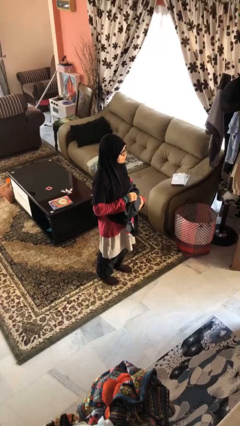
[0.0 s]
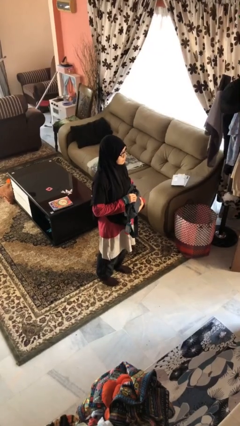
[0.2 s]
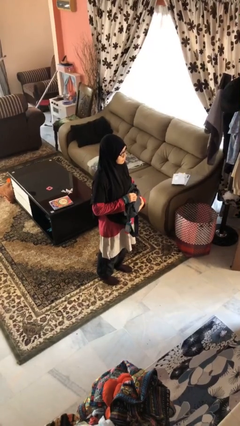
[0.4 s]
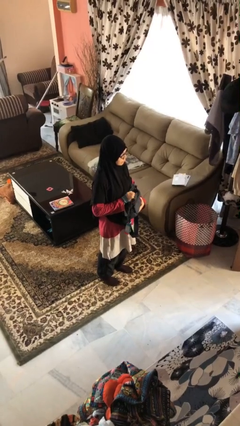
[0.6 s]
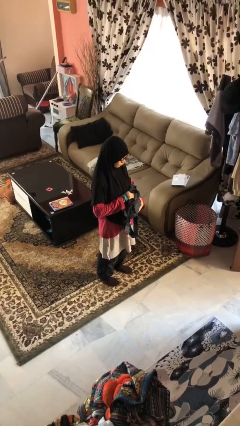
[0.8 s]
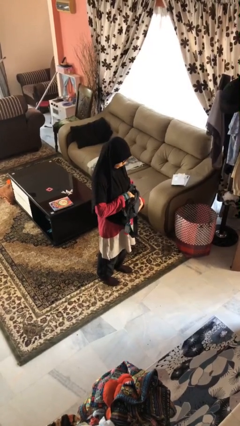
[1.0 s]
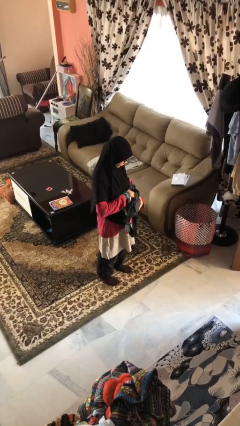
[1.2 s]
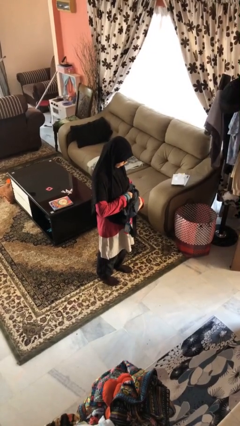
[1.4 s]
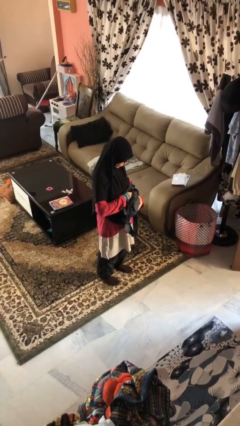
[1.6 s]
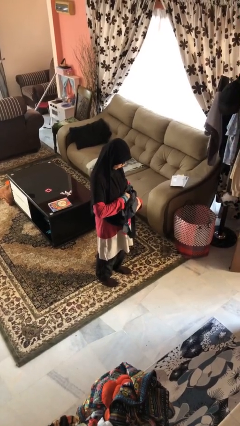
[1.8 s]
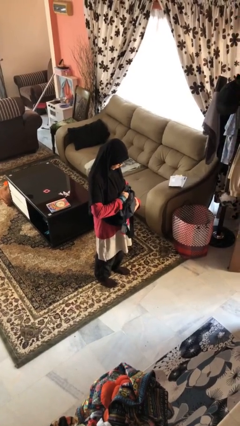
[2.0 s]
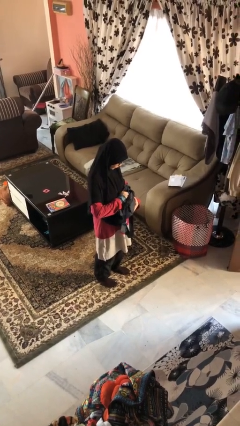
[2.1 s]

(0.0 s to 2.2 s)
person searches in purse

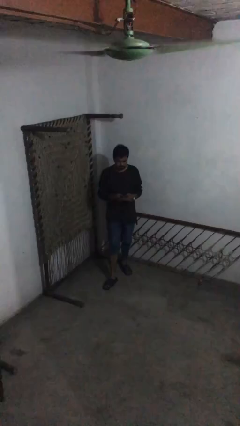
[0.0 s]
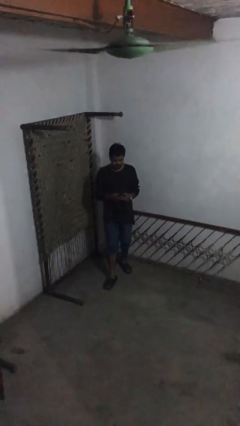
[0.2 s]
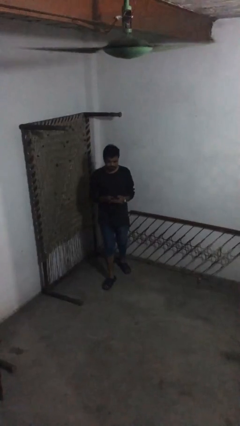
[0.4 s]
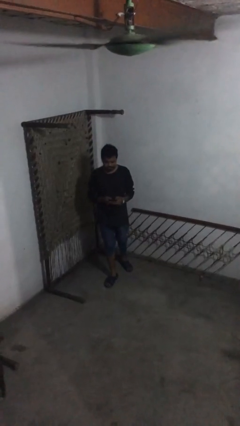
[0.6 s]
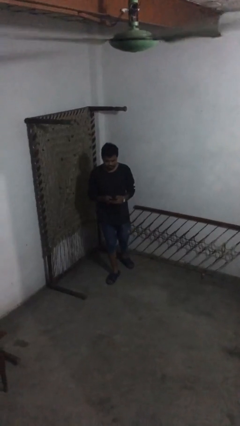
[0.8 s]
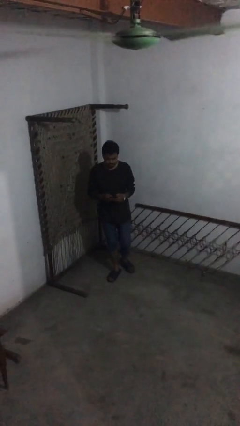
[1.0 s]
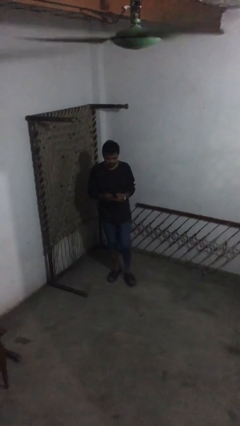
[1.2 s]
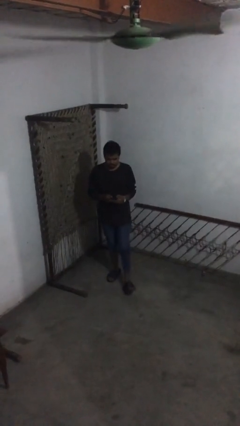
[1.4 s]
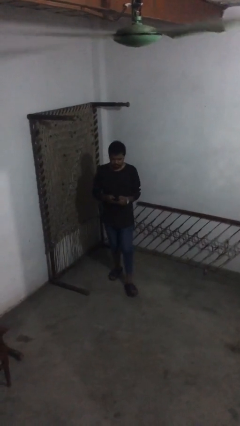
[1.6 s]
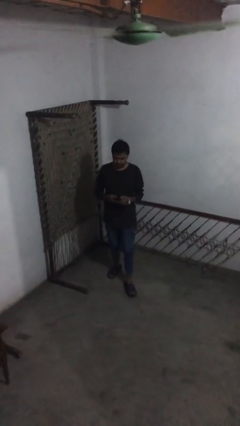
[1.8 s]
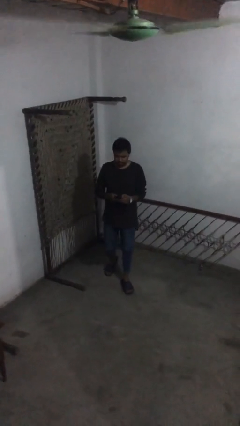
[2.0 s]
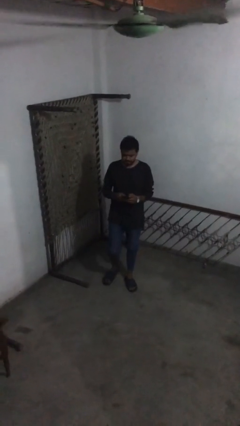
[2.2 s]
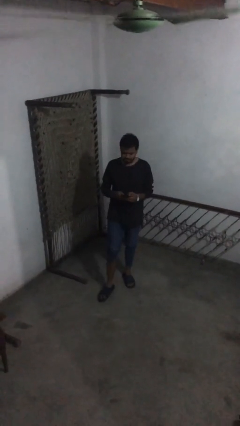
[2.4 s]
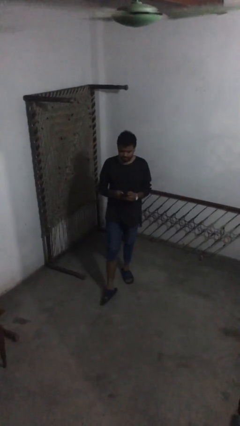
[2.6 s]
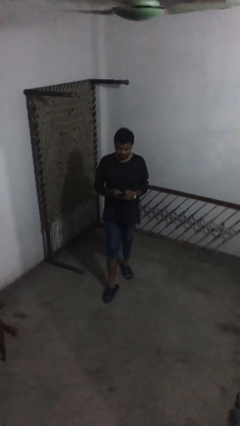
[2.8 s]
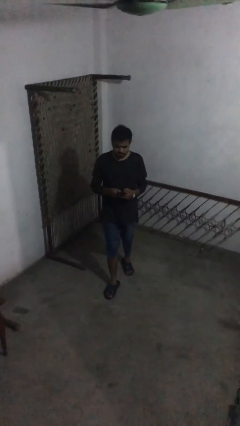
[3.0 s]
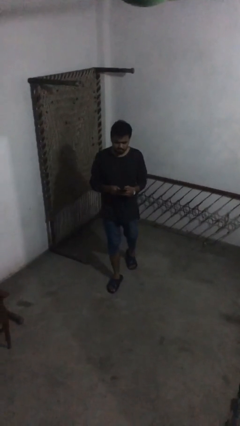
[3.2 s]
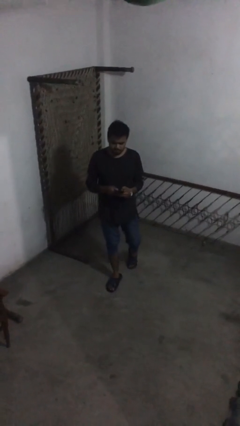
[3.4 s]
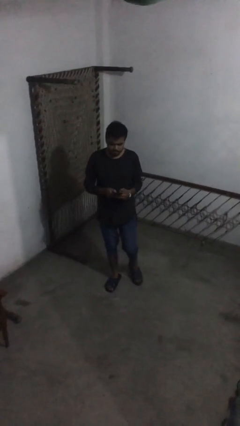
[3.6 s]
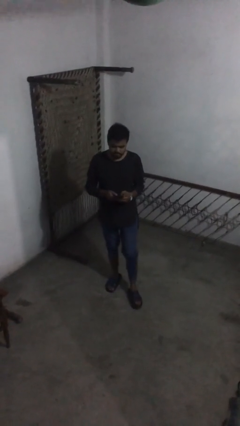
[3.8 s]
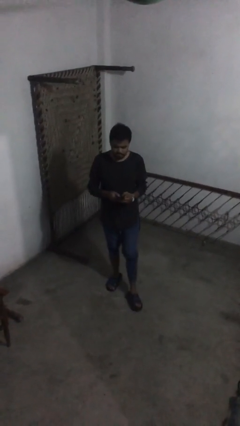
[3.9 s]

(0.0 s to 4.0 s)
person texts on phone

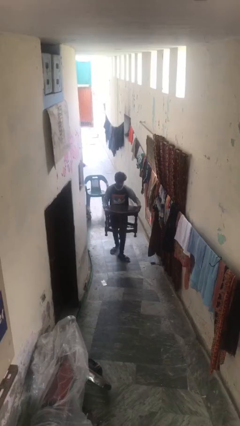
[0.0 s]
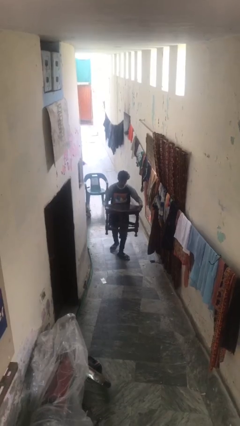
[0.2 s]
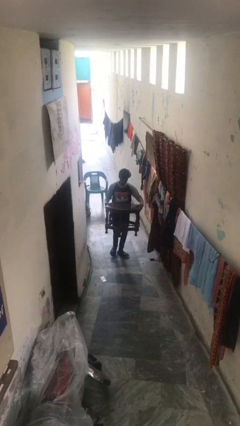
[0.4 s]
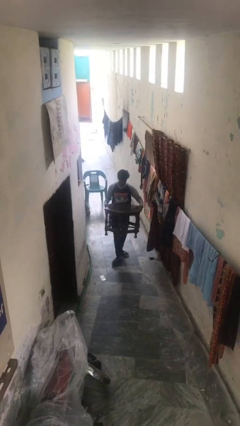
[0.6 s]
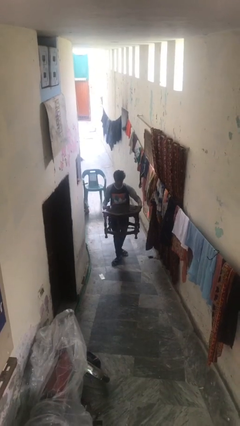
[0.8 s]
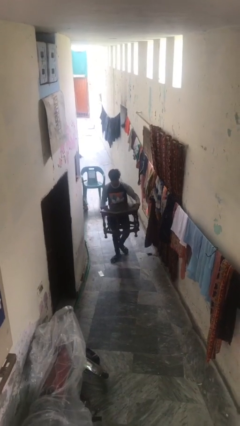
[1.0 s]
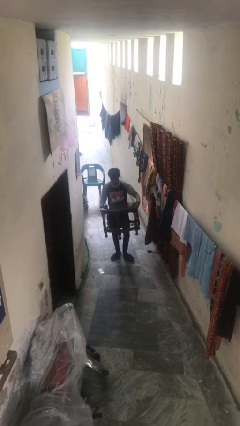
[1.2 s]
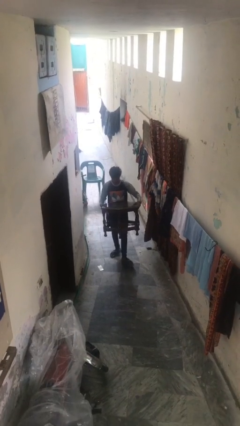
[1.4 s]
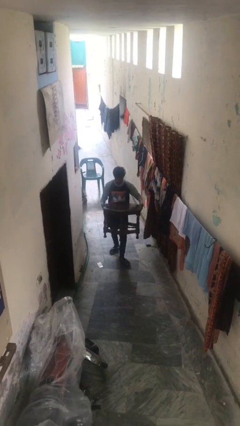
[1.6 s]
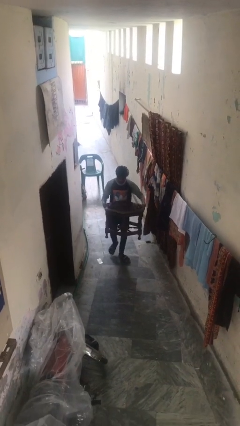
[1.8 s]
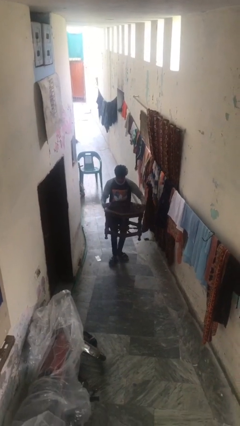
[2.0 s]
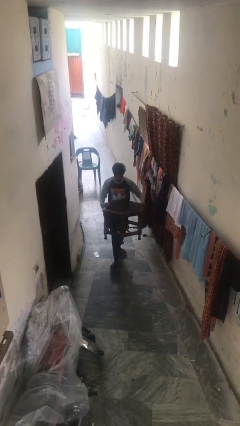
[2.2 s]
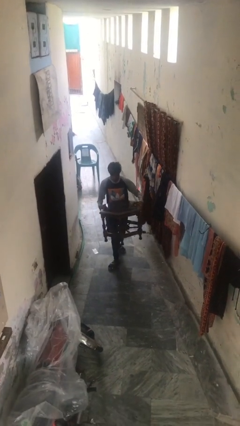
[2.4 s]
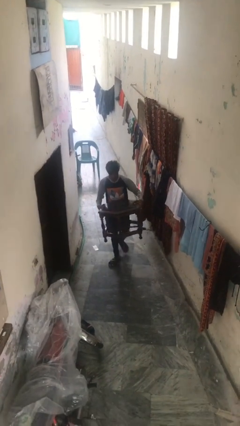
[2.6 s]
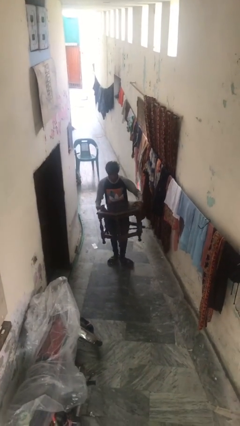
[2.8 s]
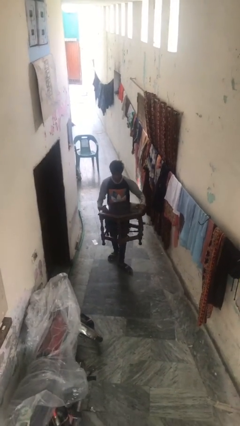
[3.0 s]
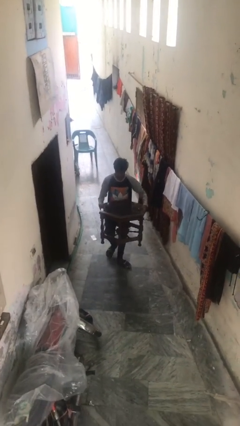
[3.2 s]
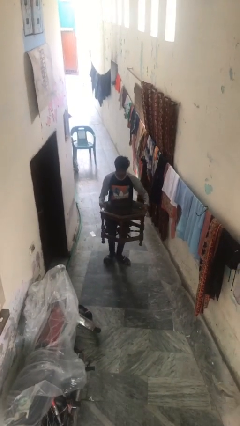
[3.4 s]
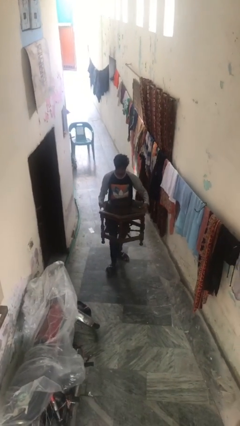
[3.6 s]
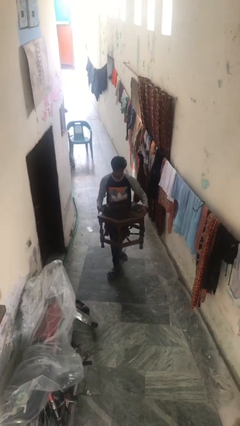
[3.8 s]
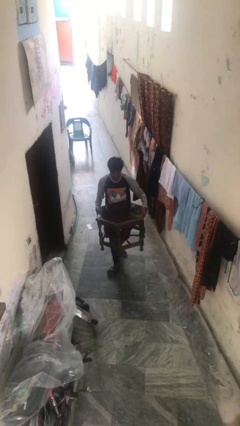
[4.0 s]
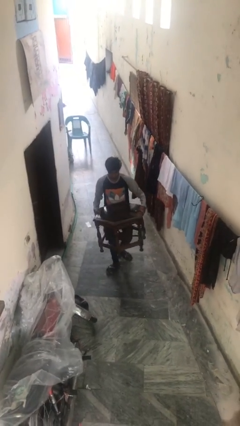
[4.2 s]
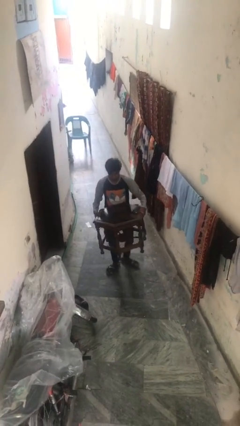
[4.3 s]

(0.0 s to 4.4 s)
person carries heavy object

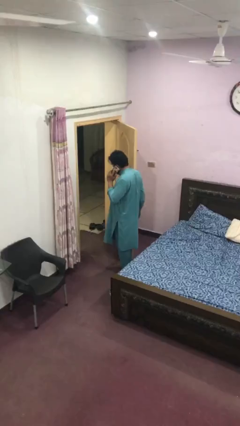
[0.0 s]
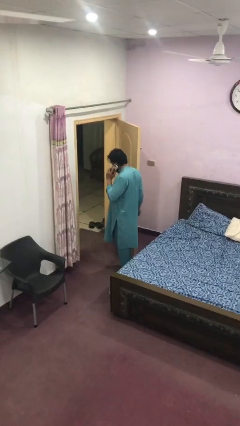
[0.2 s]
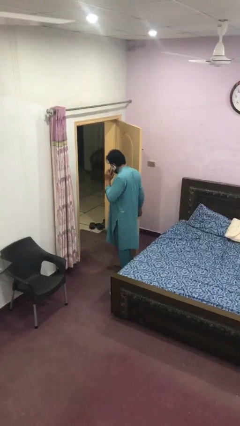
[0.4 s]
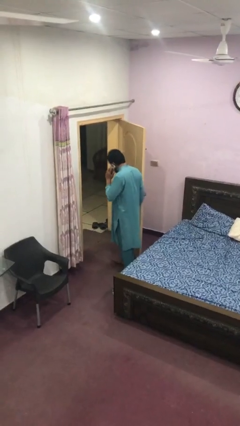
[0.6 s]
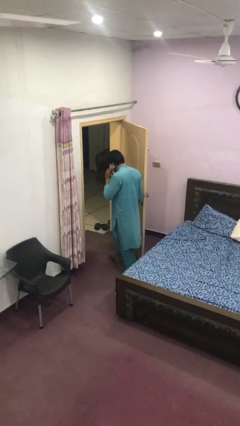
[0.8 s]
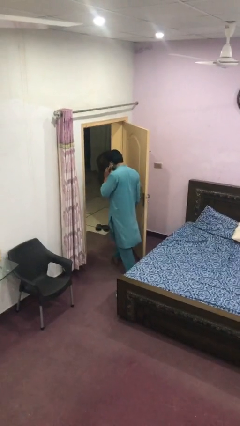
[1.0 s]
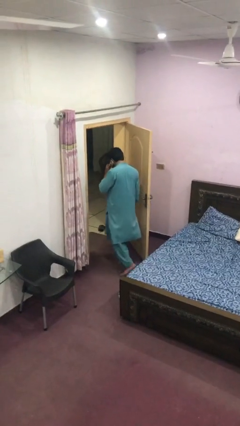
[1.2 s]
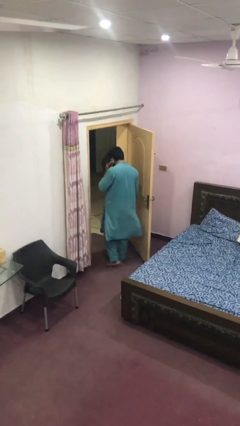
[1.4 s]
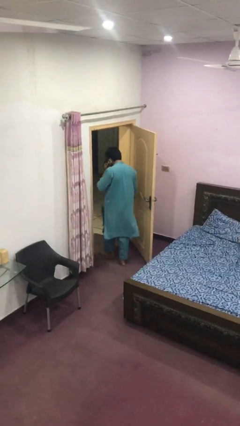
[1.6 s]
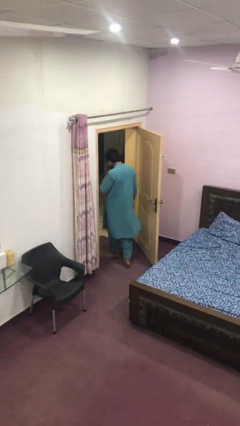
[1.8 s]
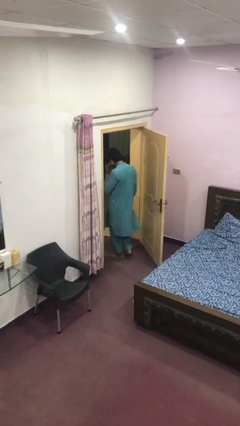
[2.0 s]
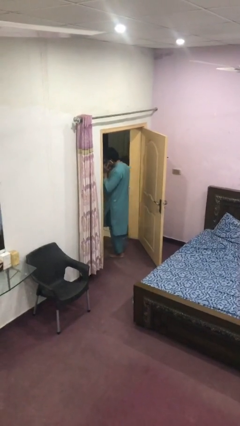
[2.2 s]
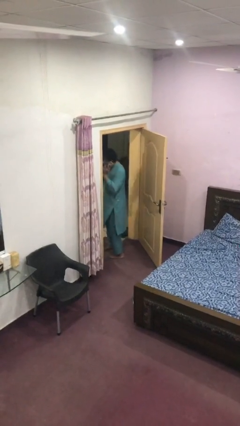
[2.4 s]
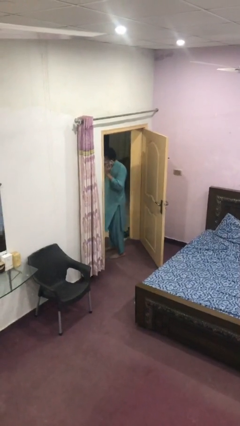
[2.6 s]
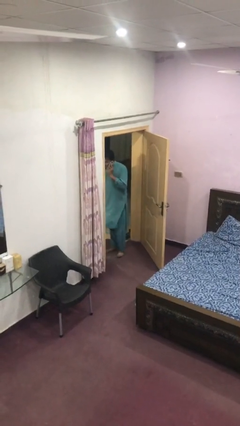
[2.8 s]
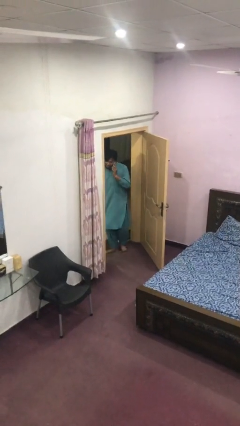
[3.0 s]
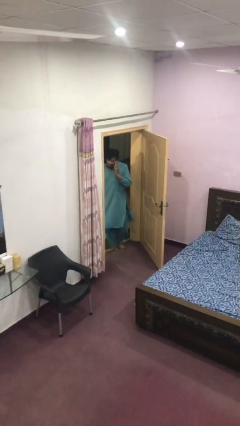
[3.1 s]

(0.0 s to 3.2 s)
person exits scene through structure

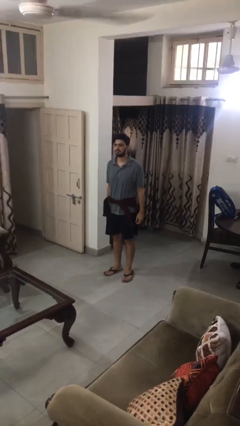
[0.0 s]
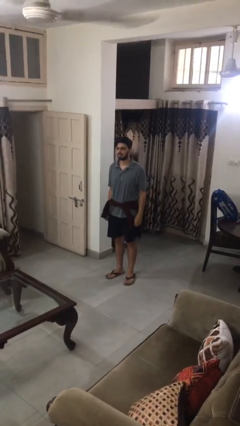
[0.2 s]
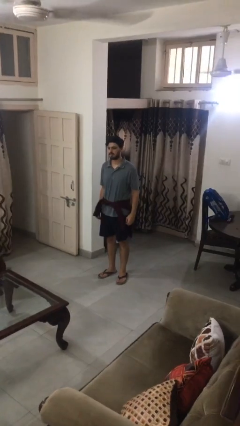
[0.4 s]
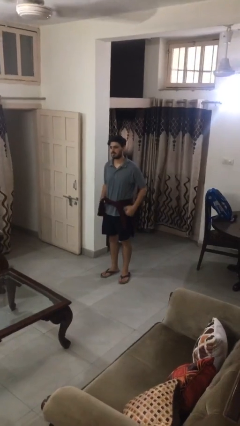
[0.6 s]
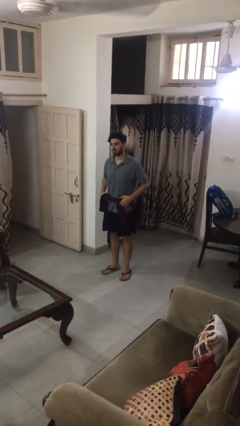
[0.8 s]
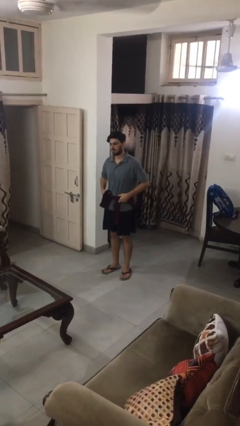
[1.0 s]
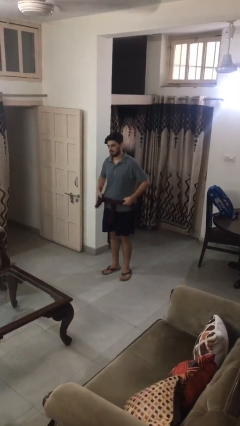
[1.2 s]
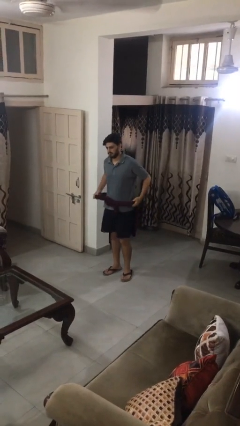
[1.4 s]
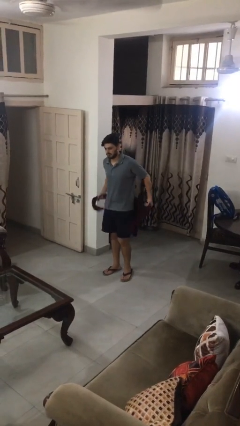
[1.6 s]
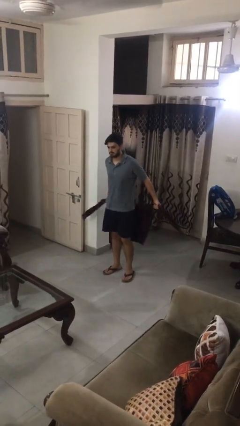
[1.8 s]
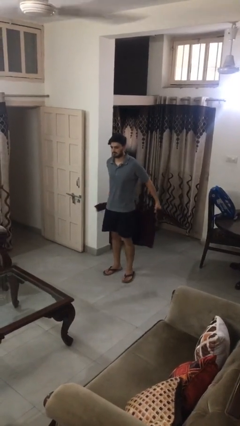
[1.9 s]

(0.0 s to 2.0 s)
person unties jacket around waist

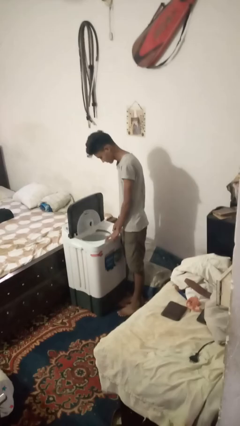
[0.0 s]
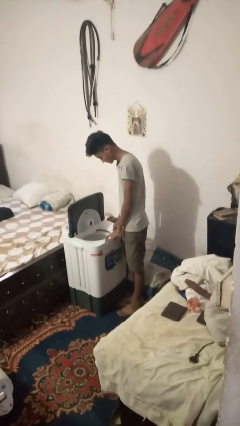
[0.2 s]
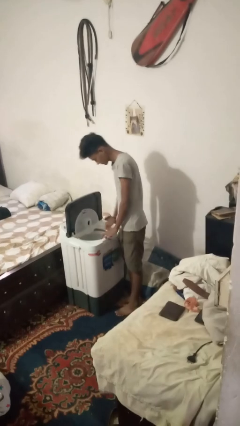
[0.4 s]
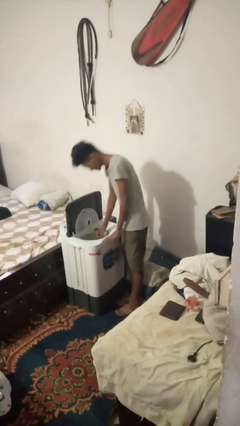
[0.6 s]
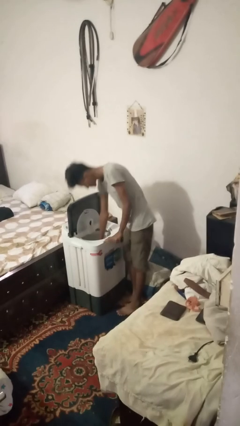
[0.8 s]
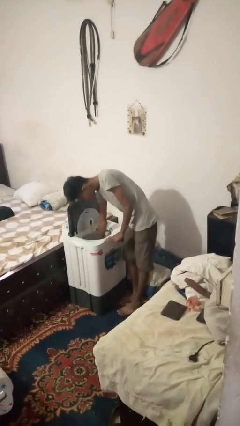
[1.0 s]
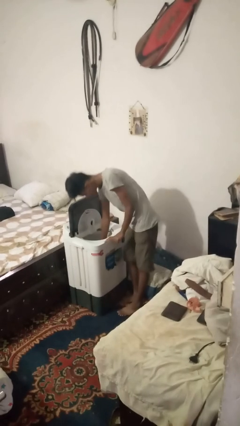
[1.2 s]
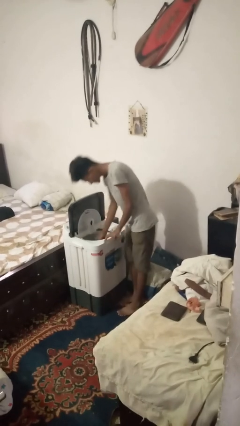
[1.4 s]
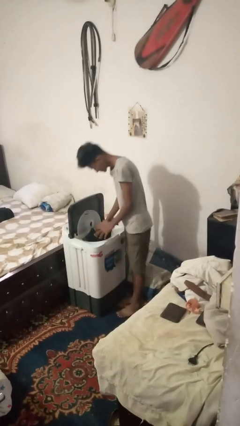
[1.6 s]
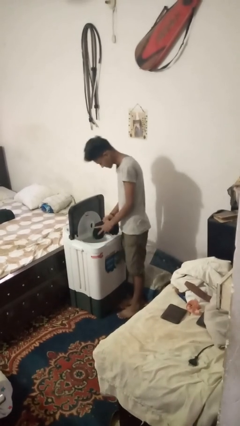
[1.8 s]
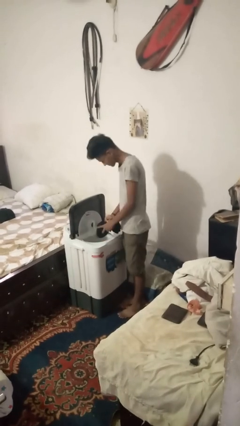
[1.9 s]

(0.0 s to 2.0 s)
person unloads clotheswasher
